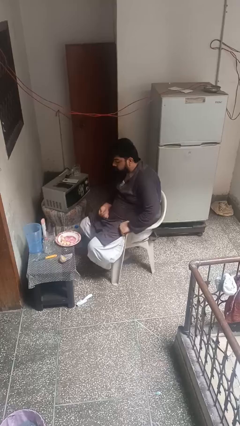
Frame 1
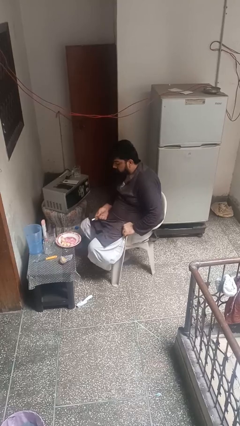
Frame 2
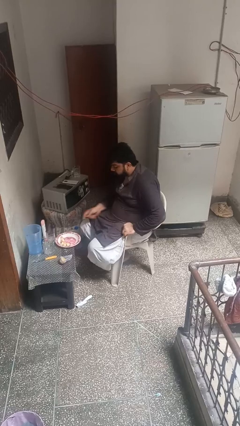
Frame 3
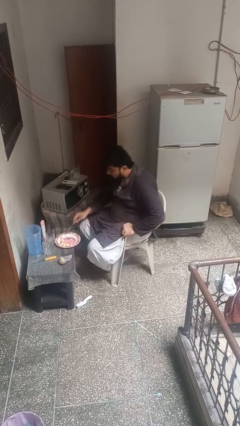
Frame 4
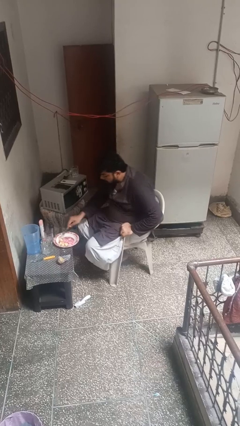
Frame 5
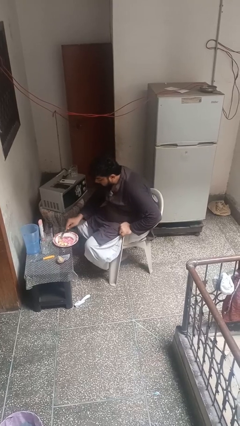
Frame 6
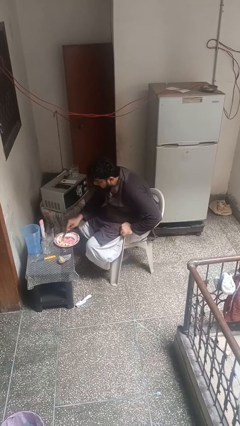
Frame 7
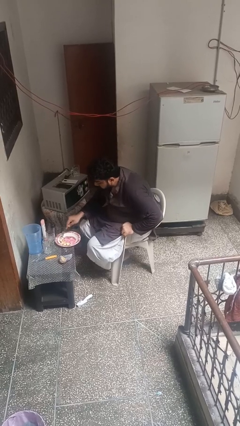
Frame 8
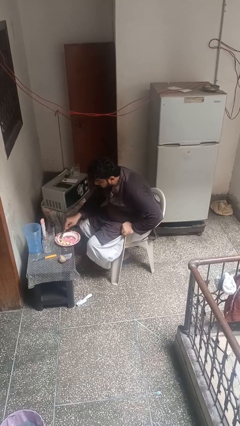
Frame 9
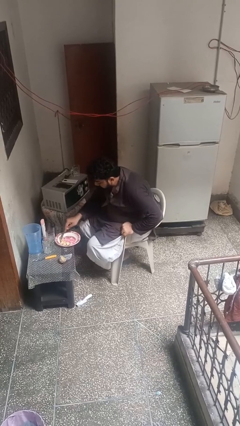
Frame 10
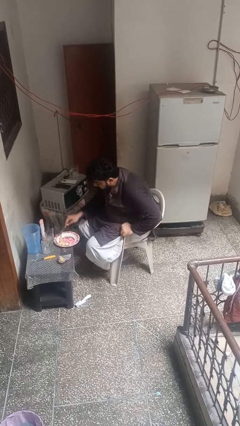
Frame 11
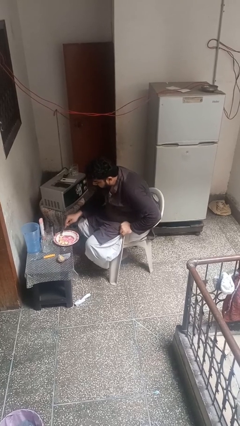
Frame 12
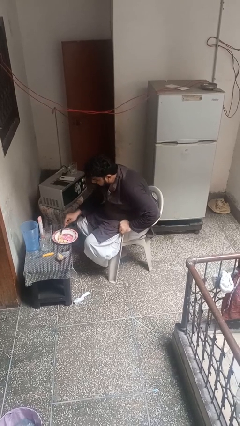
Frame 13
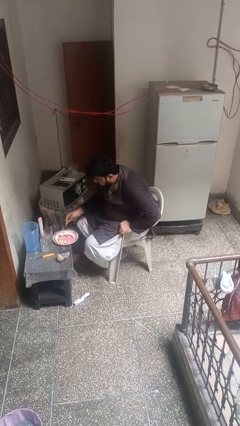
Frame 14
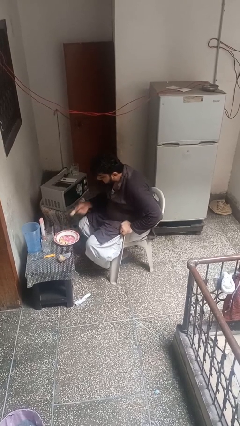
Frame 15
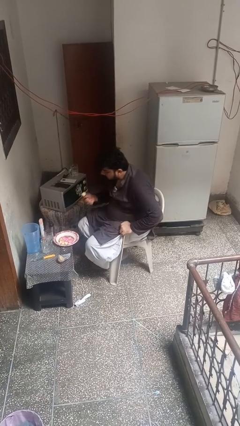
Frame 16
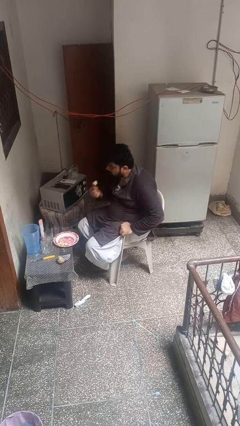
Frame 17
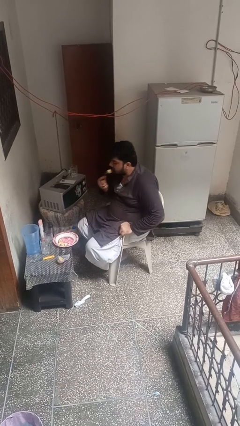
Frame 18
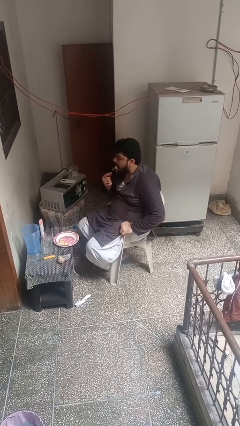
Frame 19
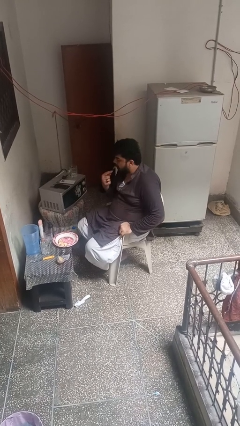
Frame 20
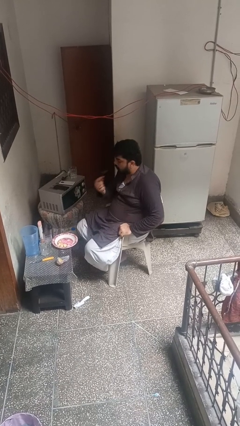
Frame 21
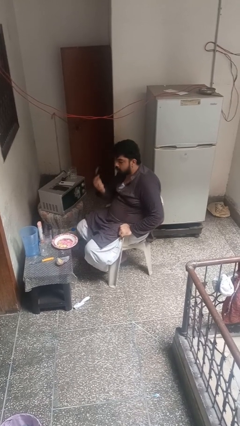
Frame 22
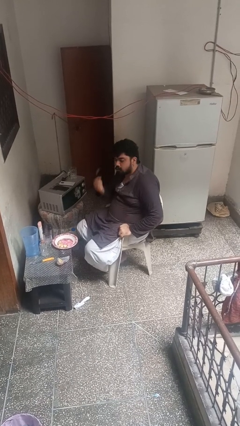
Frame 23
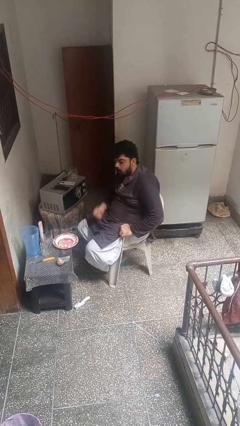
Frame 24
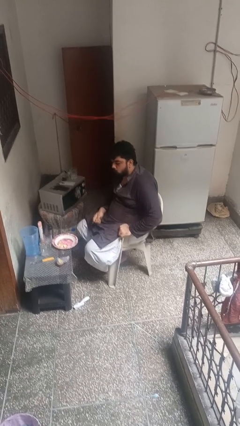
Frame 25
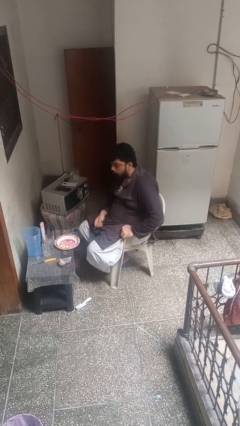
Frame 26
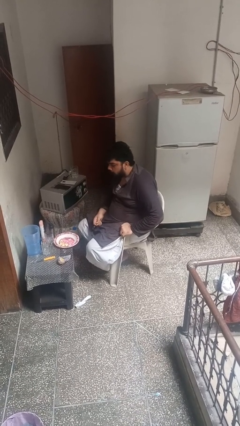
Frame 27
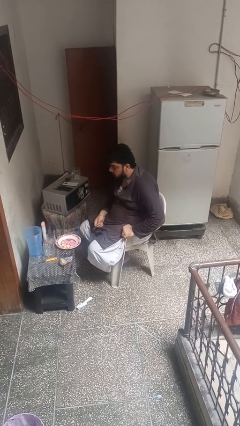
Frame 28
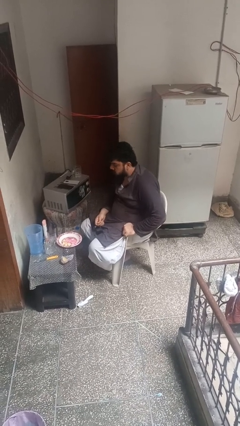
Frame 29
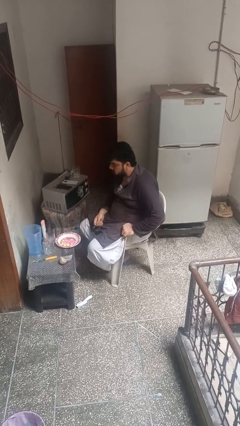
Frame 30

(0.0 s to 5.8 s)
person eats with utensil

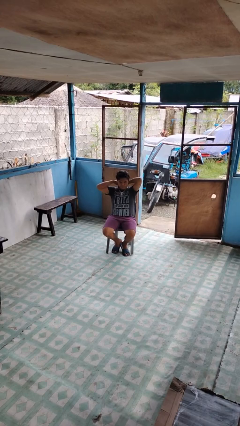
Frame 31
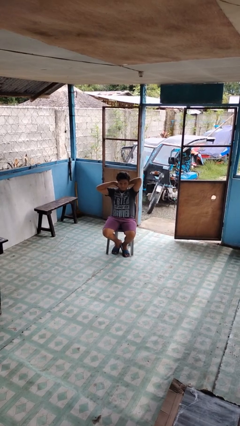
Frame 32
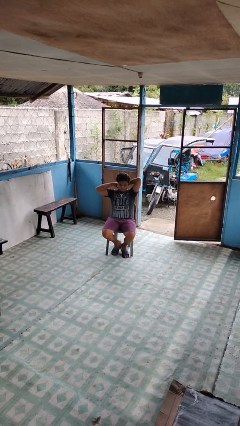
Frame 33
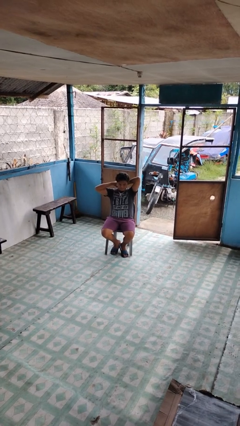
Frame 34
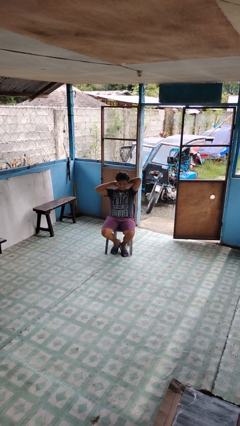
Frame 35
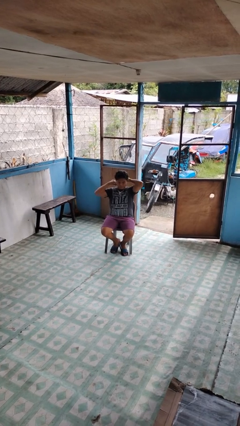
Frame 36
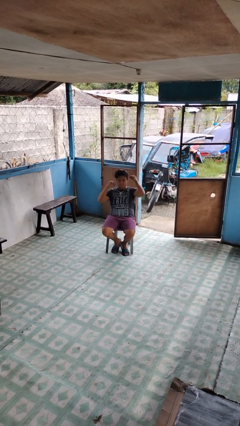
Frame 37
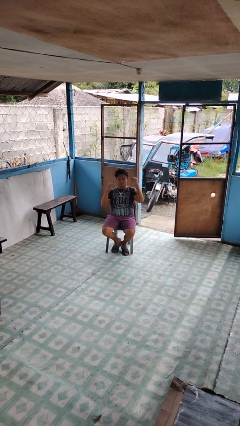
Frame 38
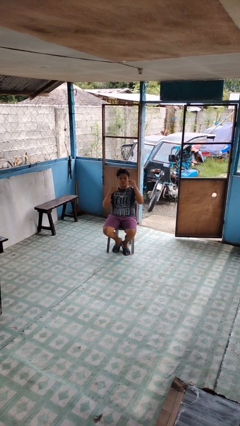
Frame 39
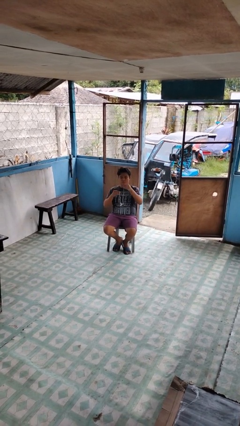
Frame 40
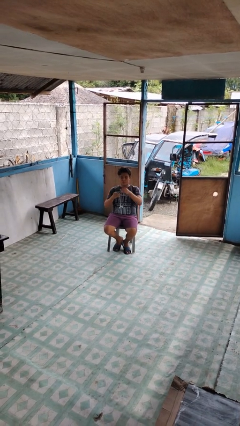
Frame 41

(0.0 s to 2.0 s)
person takes off necklace

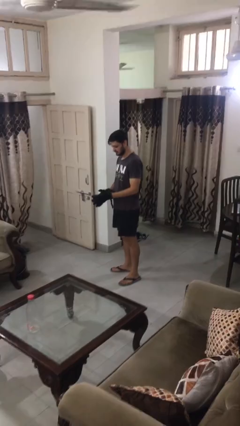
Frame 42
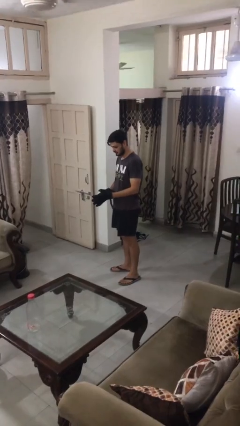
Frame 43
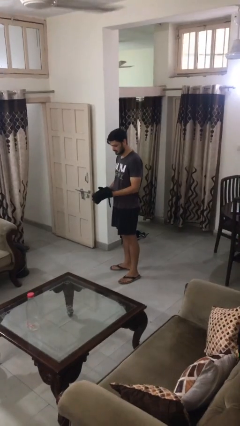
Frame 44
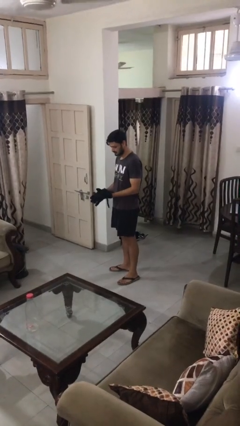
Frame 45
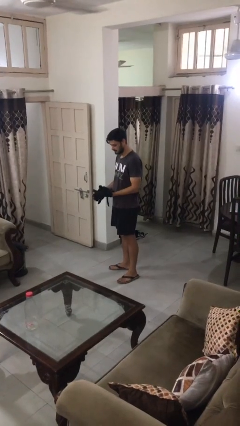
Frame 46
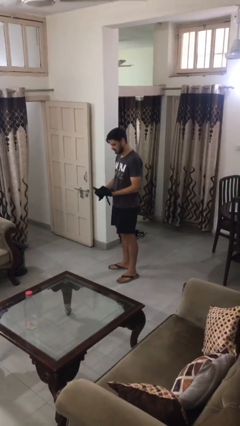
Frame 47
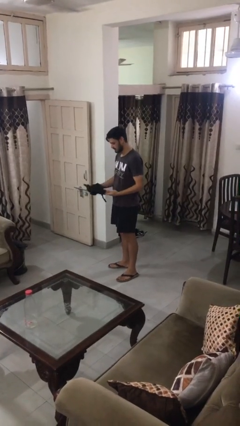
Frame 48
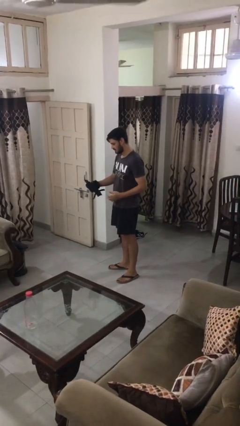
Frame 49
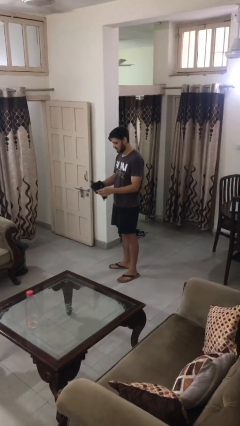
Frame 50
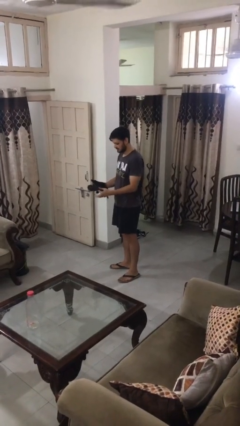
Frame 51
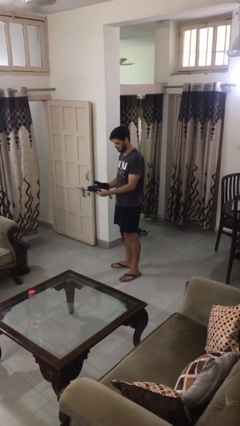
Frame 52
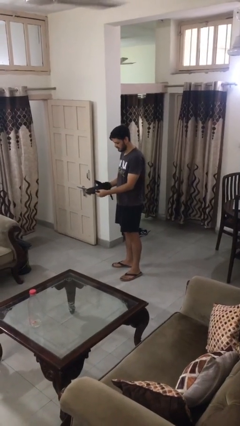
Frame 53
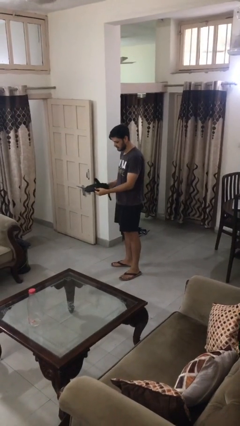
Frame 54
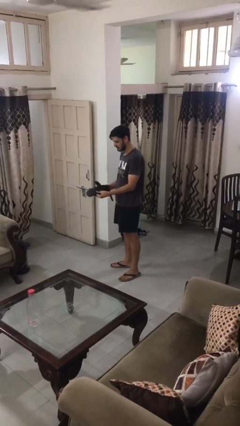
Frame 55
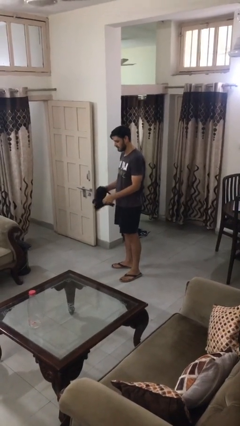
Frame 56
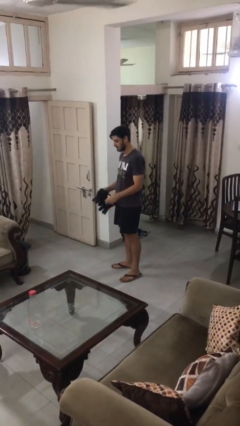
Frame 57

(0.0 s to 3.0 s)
person takes off gloves

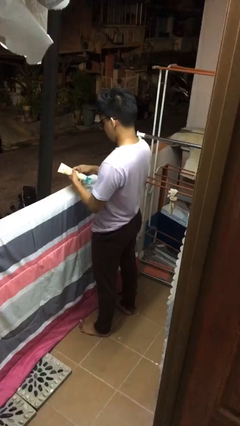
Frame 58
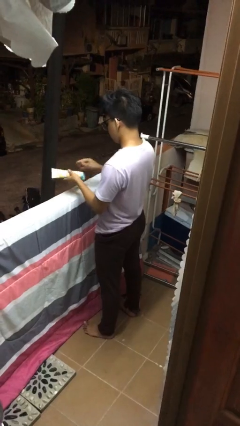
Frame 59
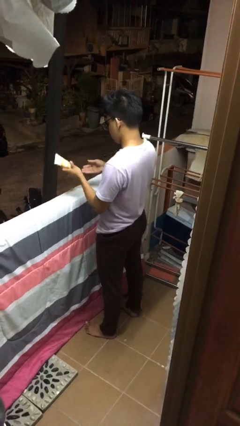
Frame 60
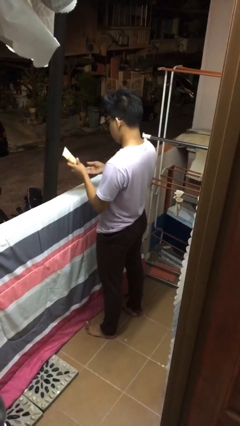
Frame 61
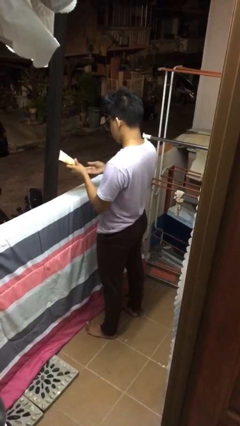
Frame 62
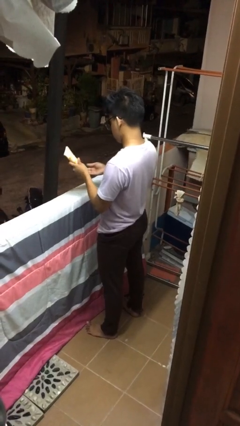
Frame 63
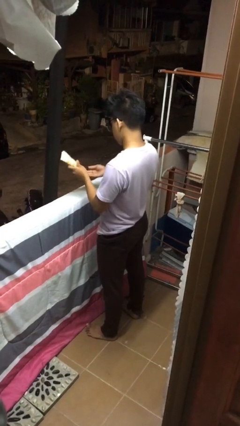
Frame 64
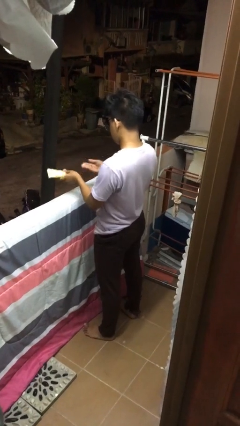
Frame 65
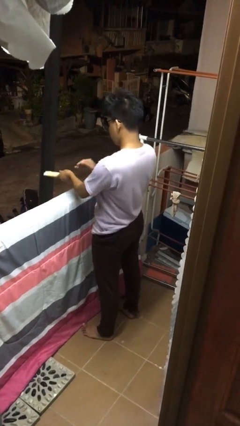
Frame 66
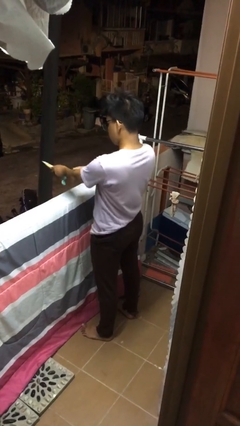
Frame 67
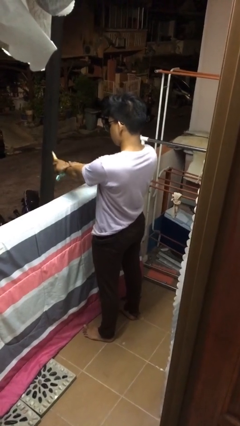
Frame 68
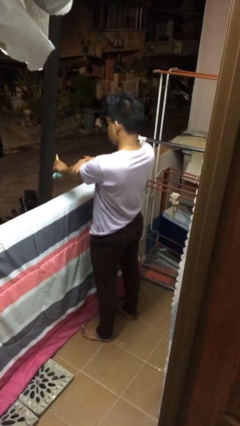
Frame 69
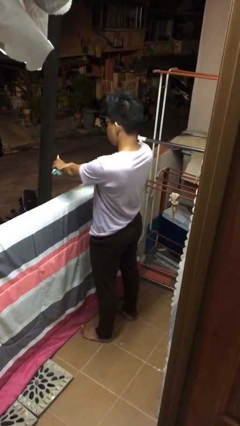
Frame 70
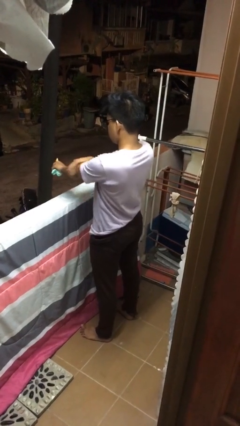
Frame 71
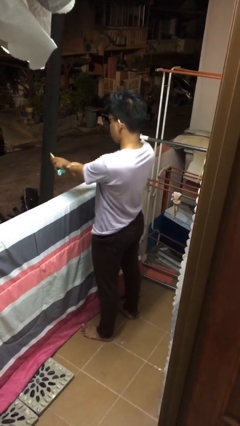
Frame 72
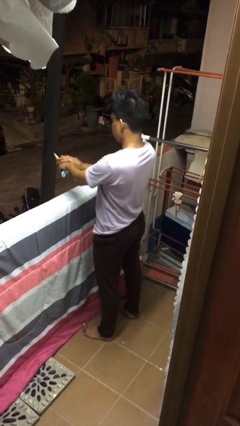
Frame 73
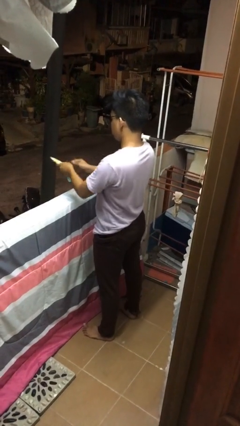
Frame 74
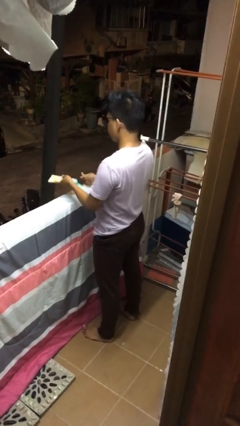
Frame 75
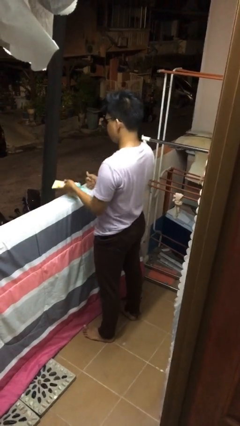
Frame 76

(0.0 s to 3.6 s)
person applies sunscreen

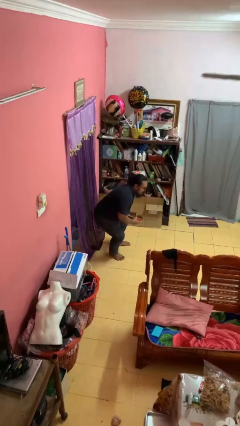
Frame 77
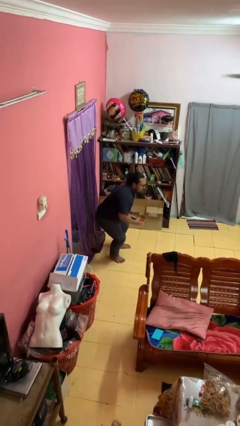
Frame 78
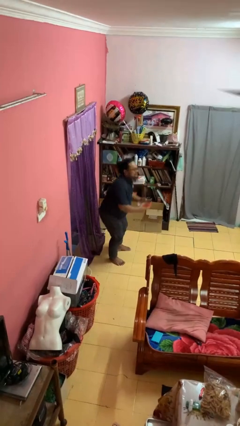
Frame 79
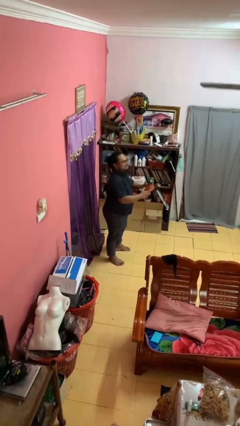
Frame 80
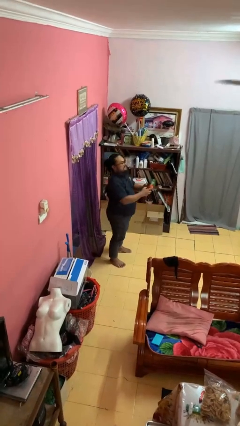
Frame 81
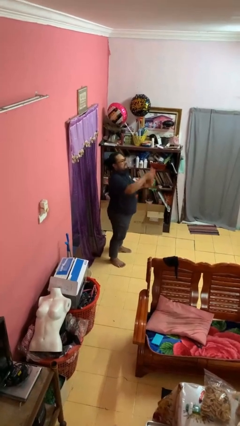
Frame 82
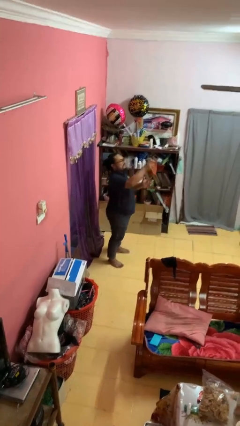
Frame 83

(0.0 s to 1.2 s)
person catches dropped object

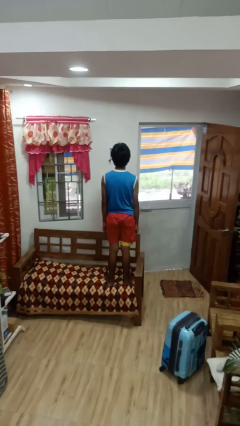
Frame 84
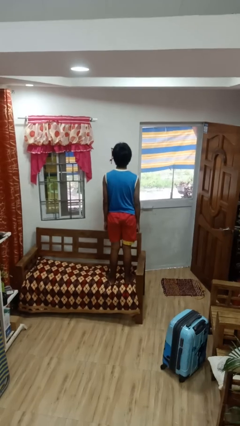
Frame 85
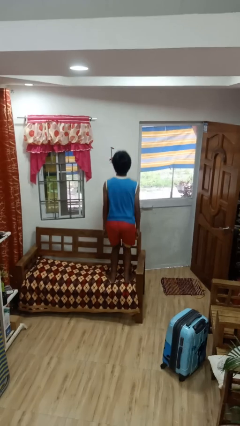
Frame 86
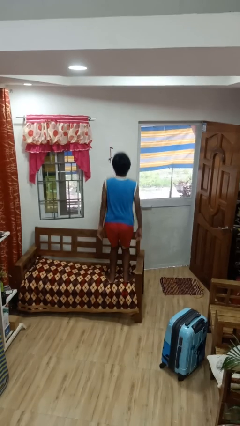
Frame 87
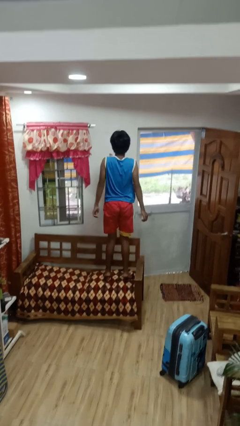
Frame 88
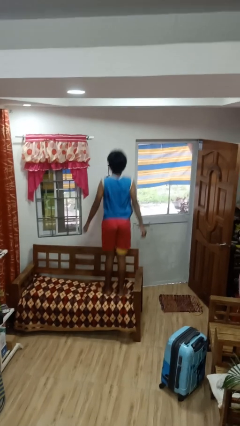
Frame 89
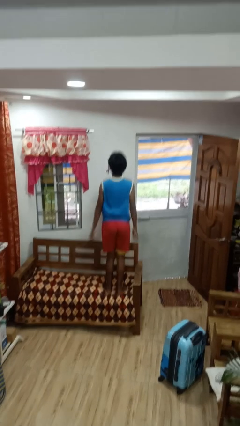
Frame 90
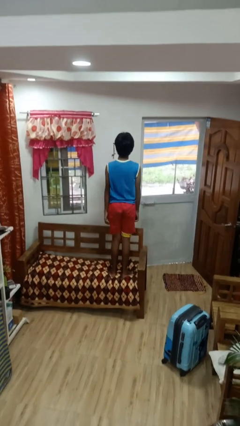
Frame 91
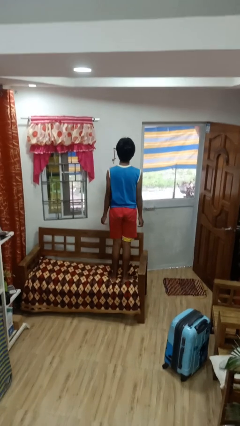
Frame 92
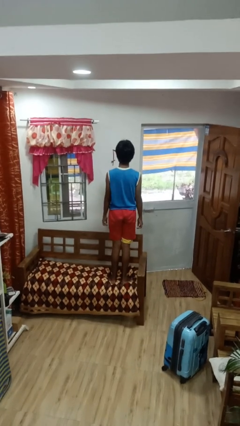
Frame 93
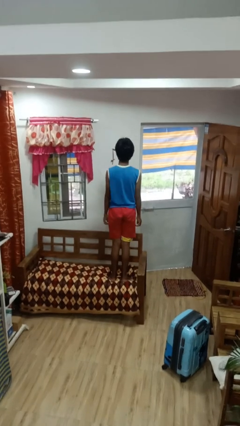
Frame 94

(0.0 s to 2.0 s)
person jumps on couch
